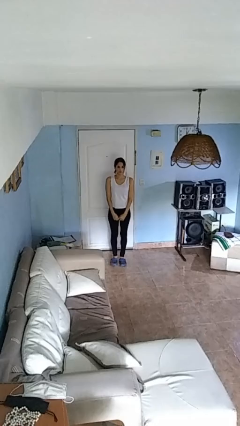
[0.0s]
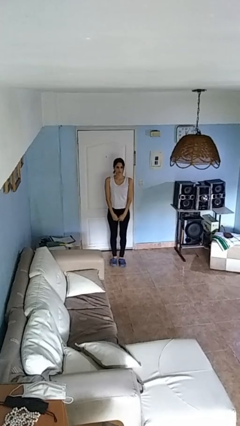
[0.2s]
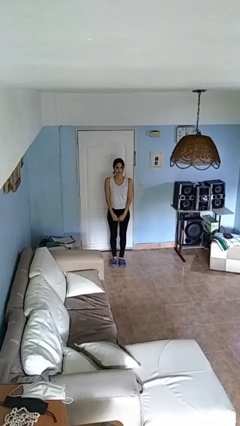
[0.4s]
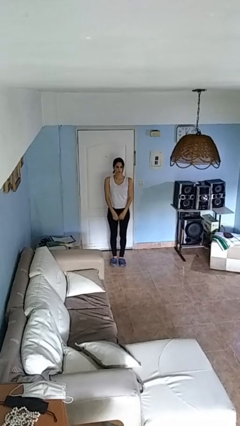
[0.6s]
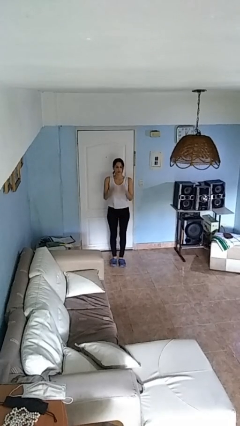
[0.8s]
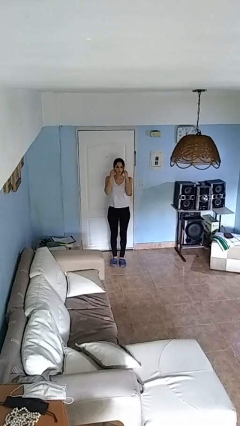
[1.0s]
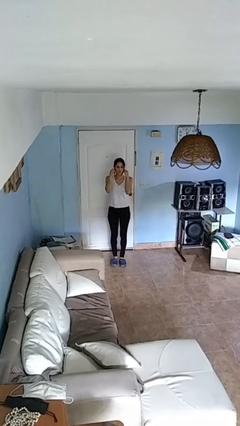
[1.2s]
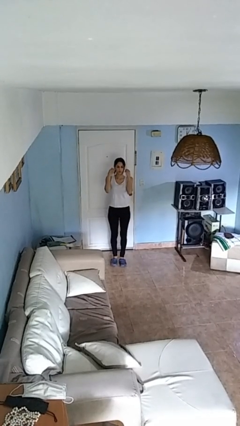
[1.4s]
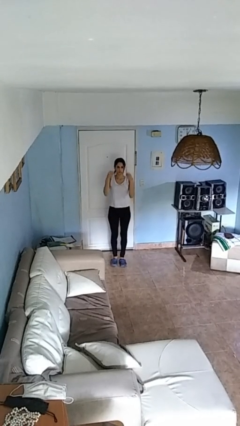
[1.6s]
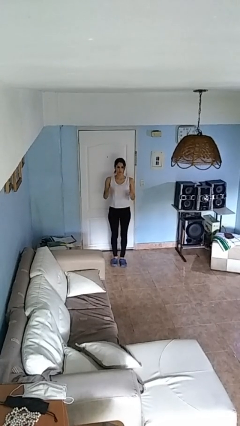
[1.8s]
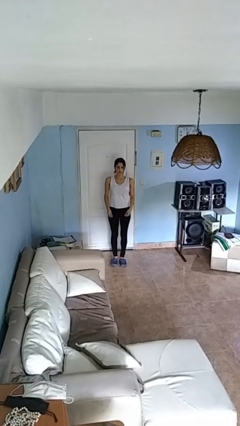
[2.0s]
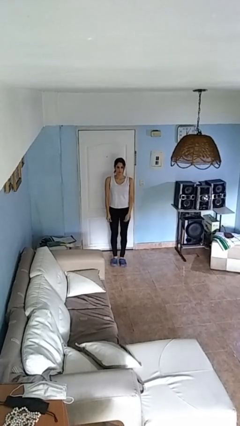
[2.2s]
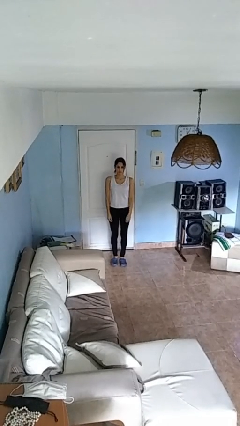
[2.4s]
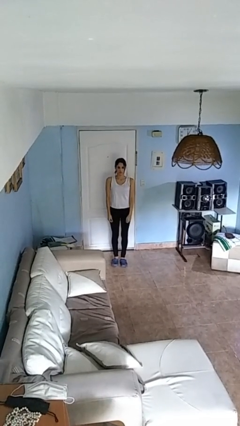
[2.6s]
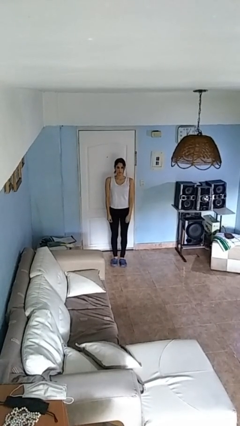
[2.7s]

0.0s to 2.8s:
person takes off earrings

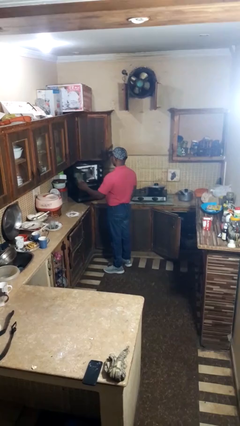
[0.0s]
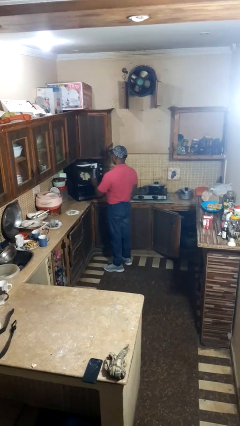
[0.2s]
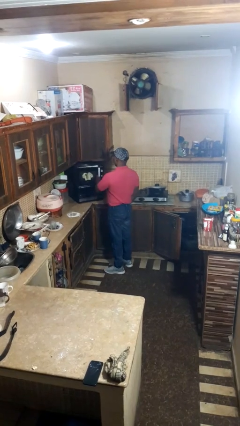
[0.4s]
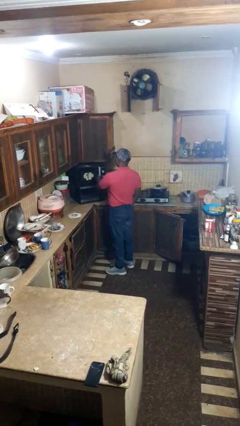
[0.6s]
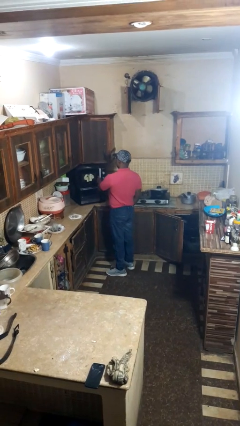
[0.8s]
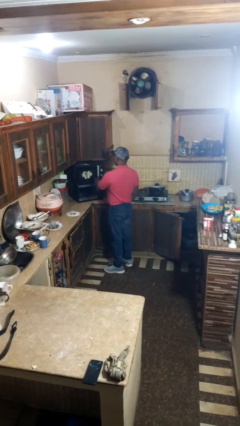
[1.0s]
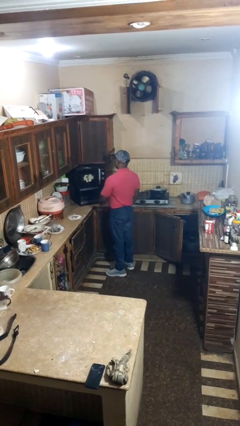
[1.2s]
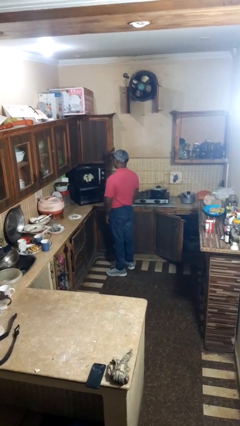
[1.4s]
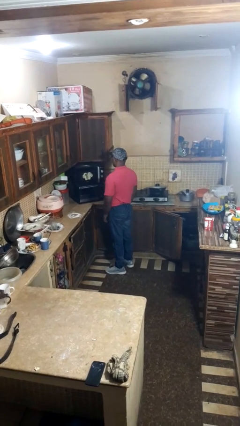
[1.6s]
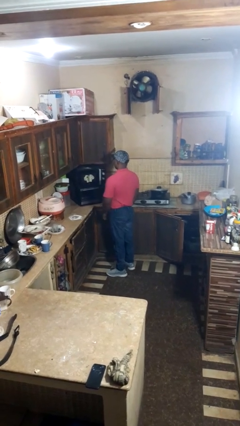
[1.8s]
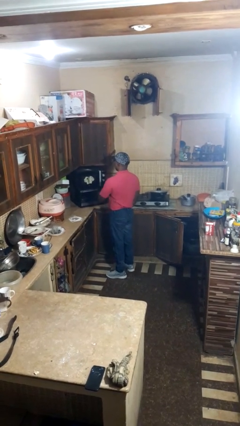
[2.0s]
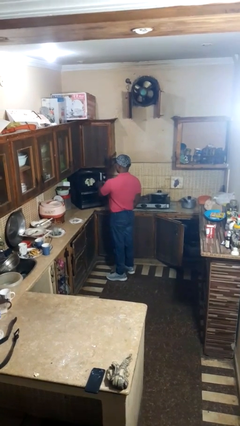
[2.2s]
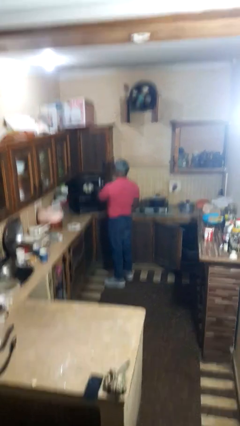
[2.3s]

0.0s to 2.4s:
person closes microwave

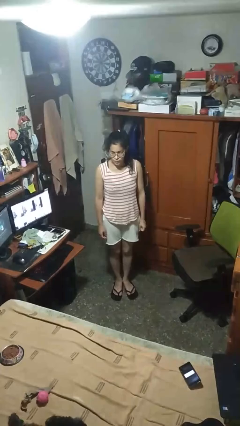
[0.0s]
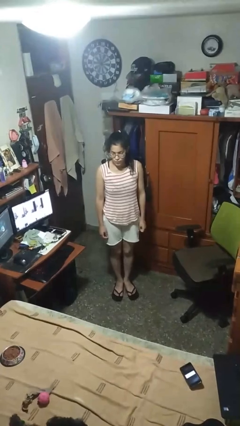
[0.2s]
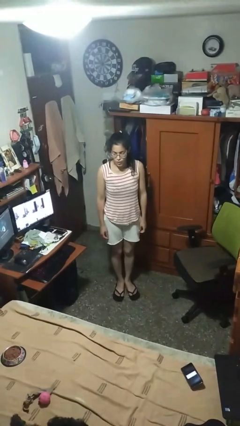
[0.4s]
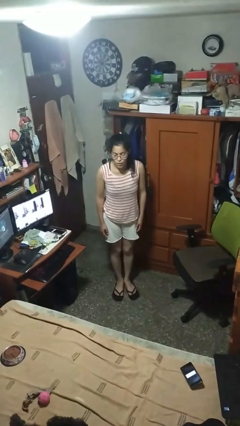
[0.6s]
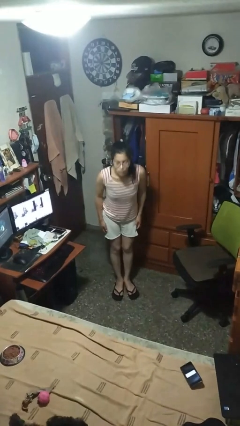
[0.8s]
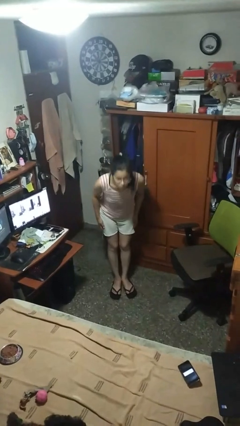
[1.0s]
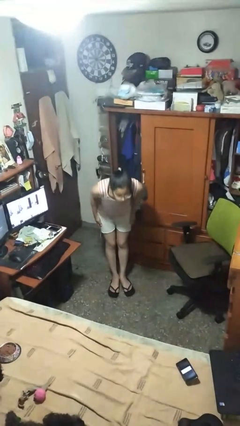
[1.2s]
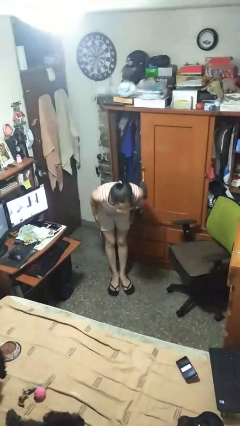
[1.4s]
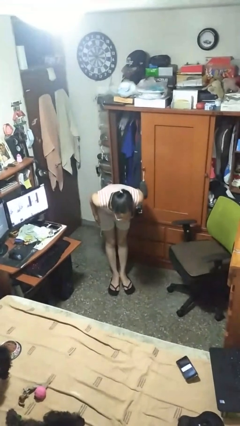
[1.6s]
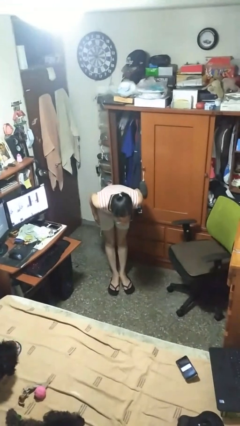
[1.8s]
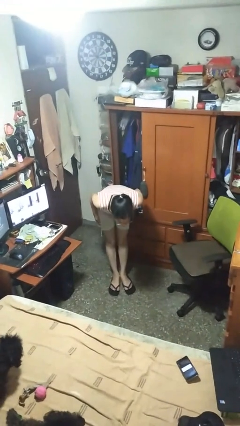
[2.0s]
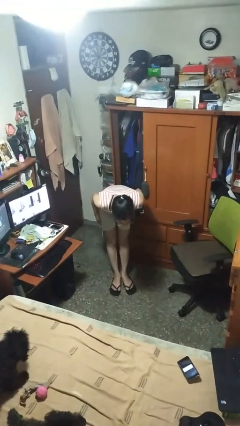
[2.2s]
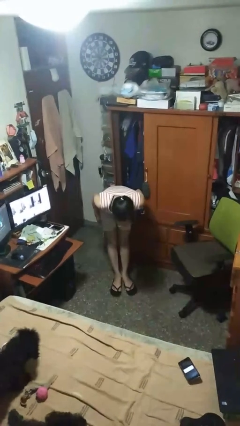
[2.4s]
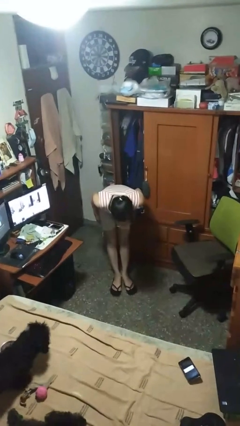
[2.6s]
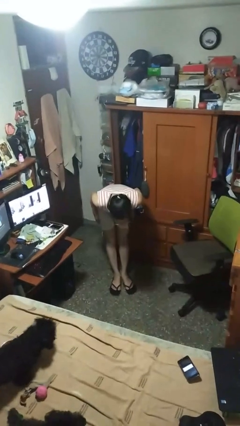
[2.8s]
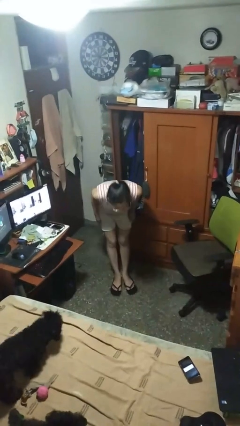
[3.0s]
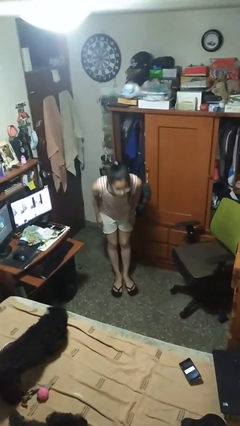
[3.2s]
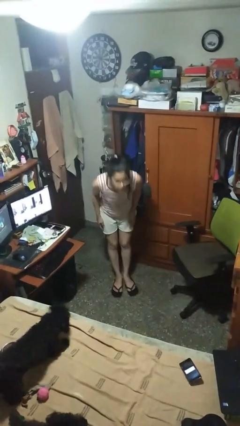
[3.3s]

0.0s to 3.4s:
person bows

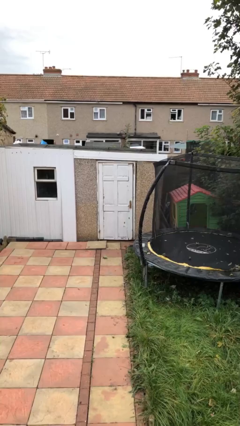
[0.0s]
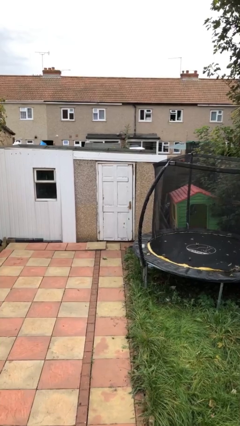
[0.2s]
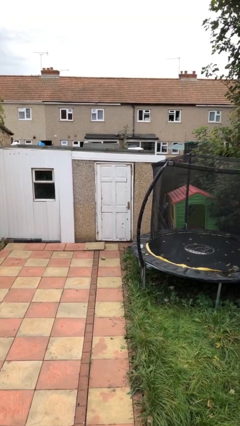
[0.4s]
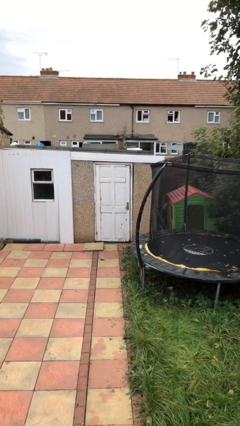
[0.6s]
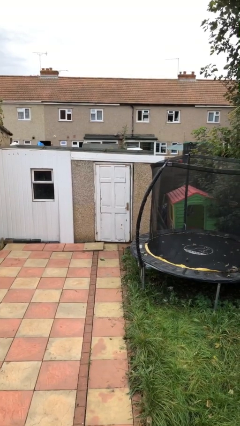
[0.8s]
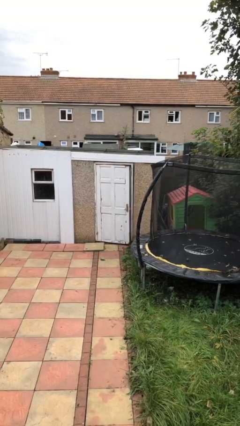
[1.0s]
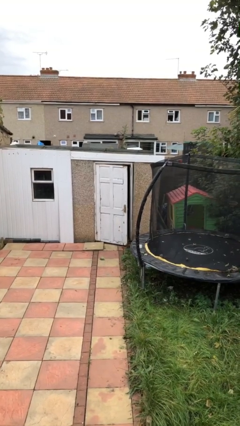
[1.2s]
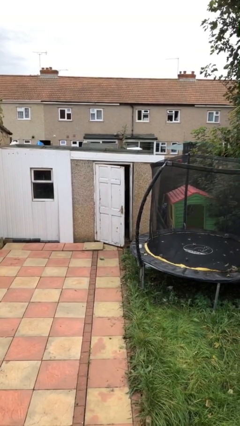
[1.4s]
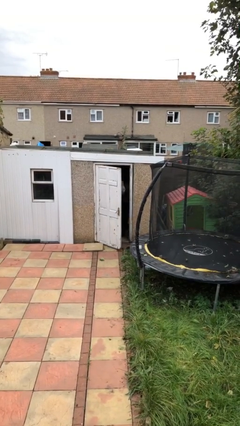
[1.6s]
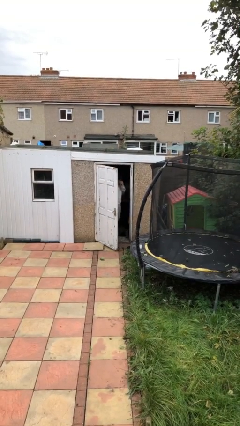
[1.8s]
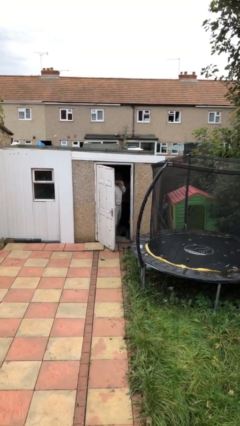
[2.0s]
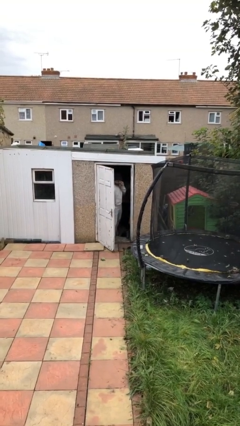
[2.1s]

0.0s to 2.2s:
person opens facility door

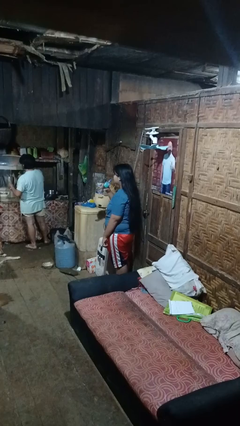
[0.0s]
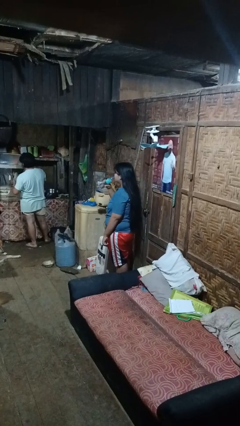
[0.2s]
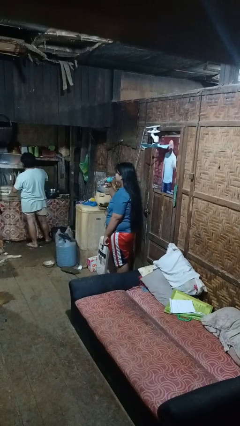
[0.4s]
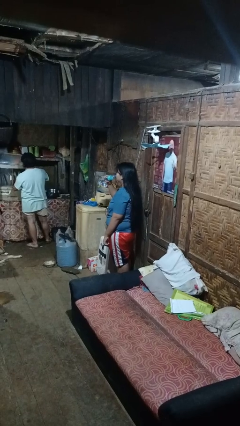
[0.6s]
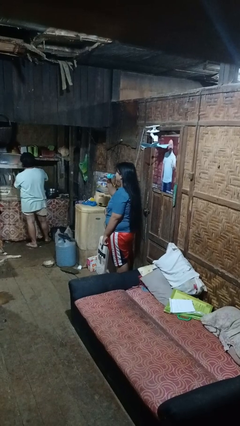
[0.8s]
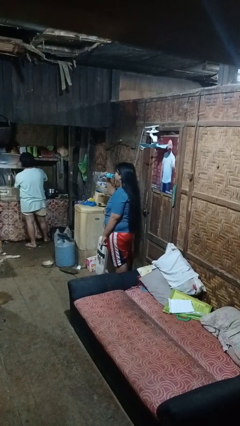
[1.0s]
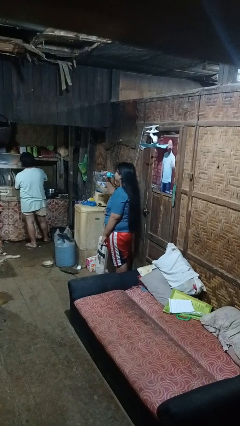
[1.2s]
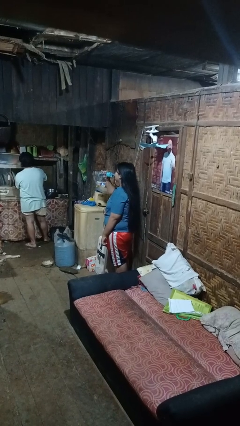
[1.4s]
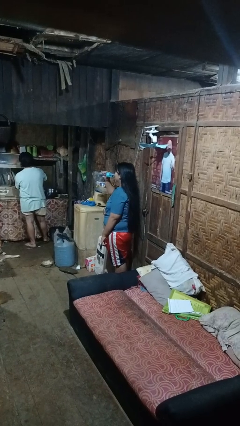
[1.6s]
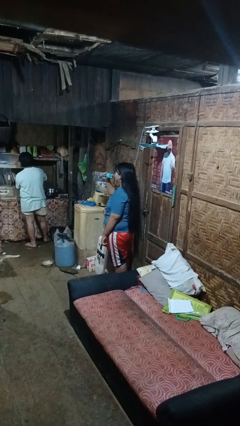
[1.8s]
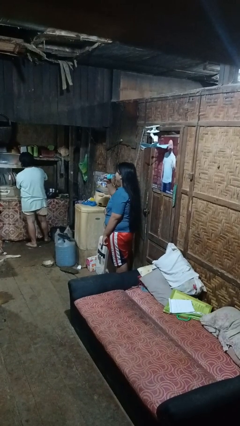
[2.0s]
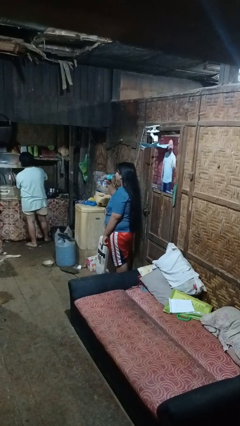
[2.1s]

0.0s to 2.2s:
person drinks from bottle

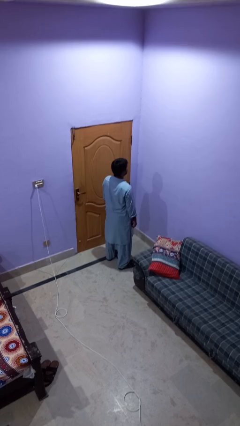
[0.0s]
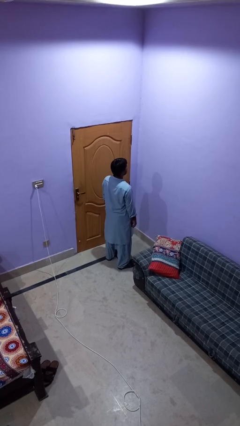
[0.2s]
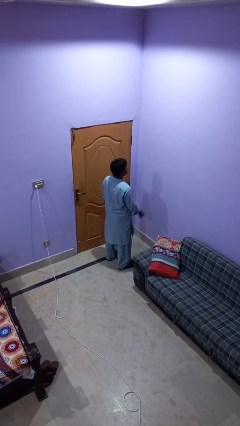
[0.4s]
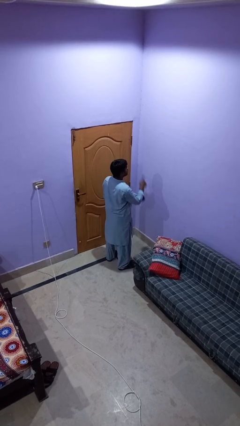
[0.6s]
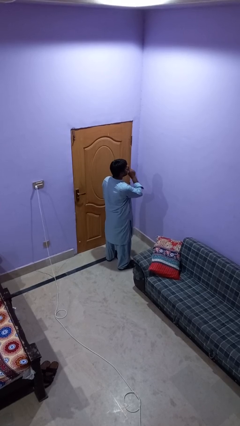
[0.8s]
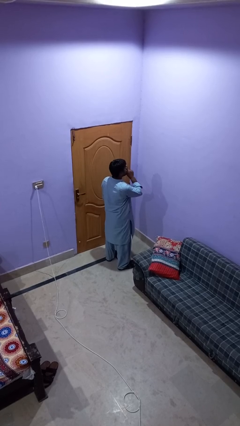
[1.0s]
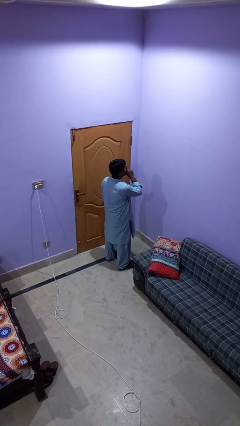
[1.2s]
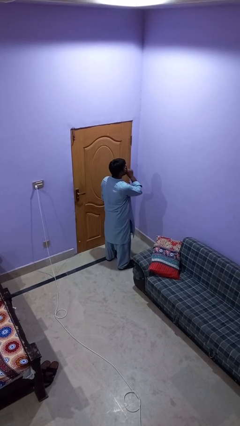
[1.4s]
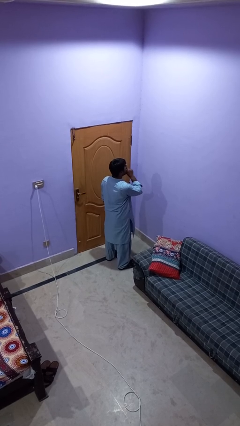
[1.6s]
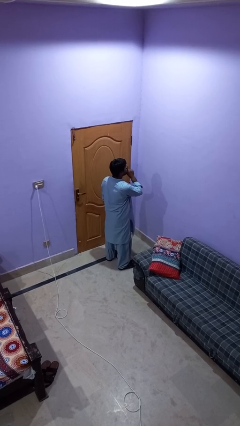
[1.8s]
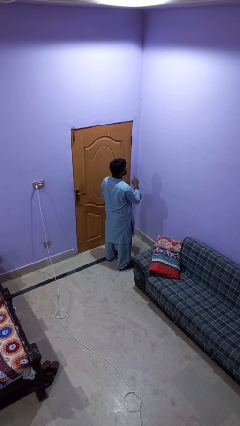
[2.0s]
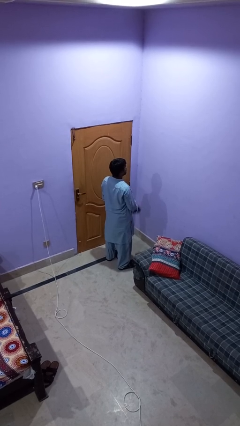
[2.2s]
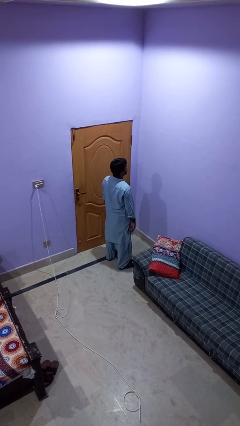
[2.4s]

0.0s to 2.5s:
person gestures be quiet

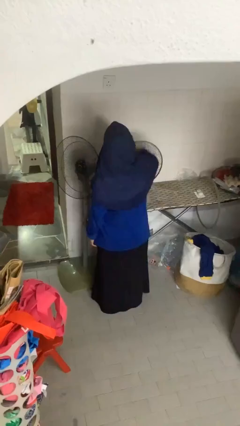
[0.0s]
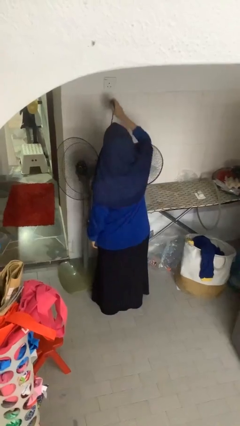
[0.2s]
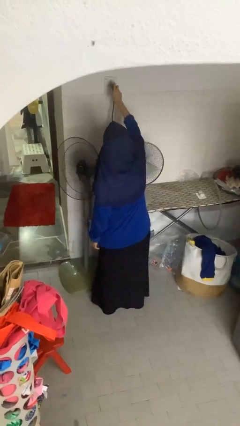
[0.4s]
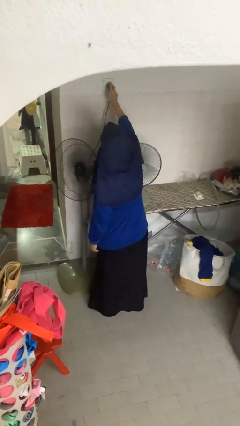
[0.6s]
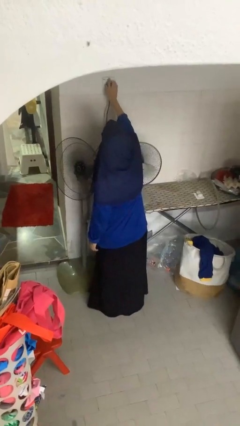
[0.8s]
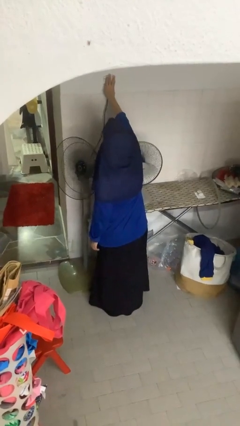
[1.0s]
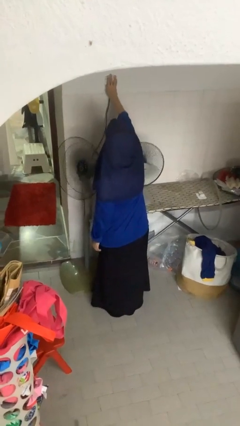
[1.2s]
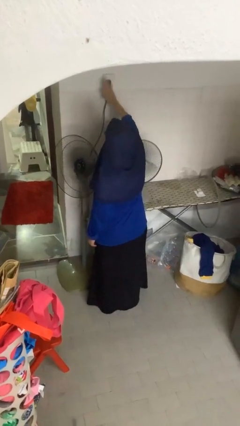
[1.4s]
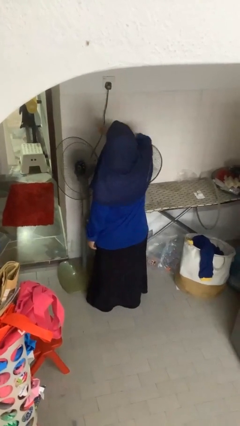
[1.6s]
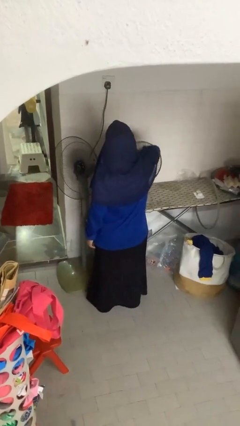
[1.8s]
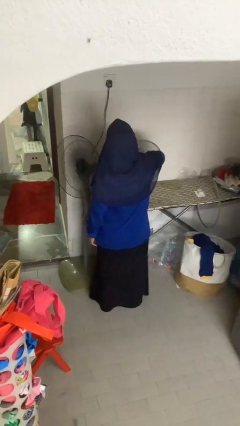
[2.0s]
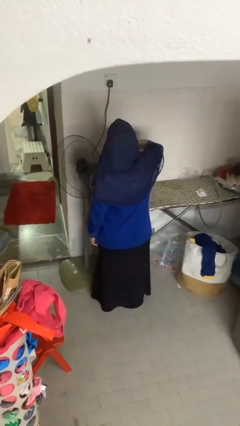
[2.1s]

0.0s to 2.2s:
person plugs into electrical socket
